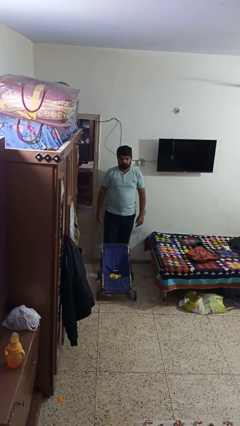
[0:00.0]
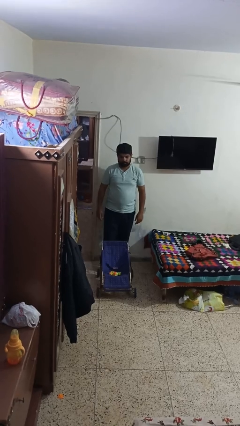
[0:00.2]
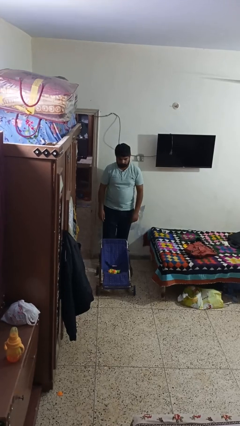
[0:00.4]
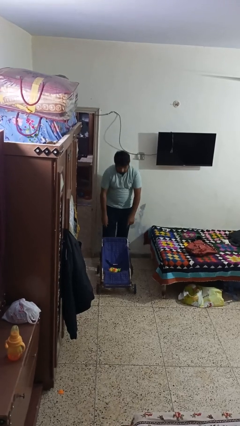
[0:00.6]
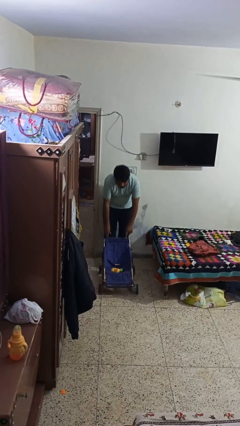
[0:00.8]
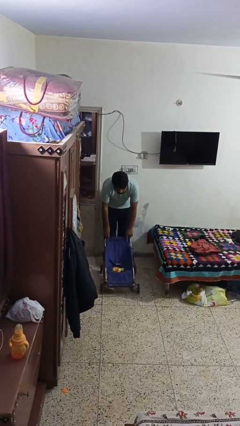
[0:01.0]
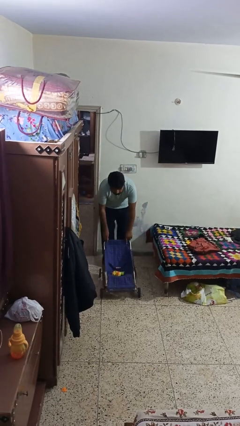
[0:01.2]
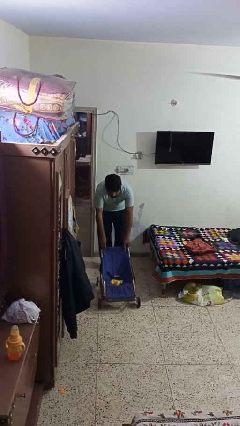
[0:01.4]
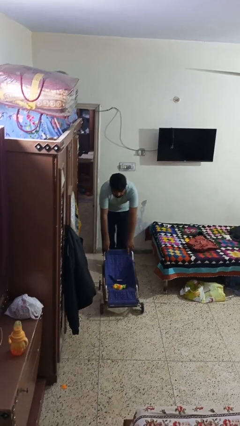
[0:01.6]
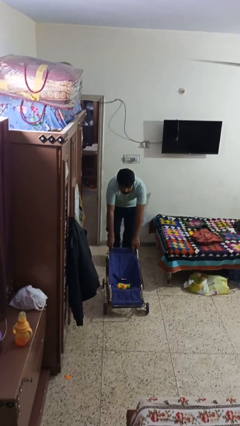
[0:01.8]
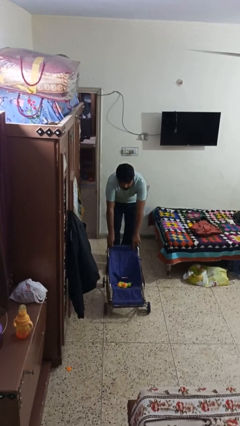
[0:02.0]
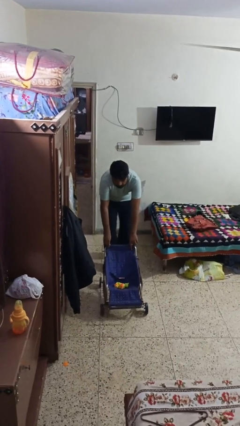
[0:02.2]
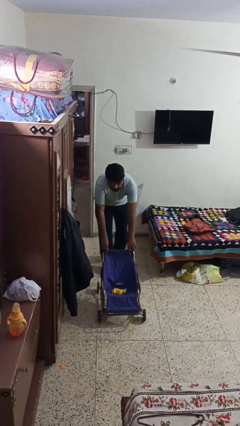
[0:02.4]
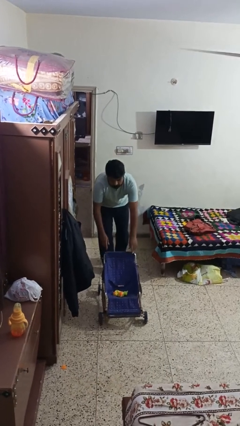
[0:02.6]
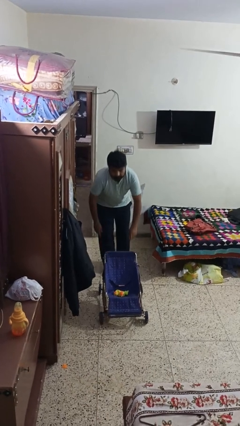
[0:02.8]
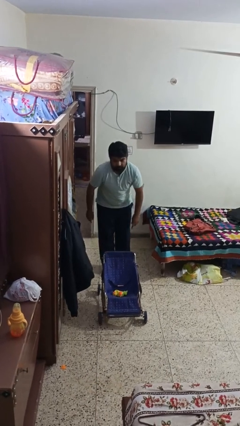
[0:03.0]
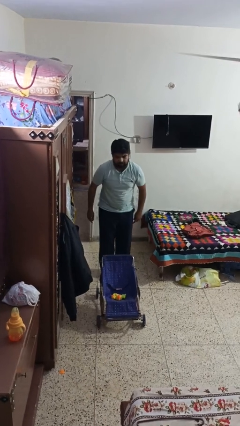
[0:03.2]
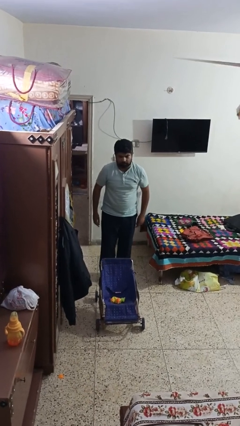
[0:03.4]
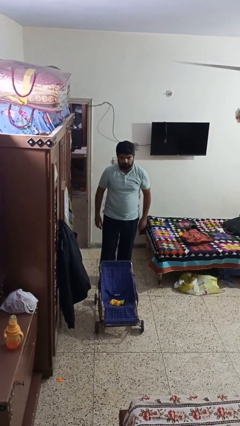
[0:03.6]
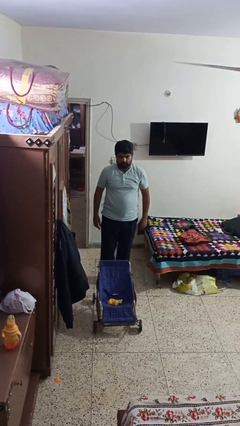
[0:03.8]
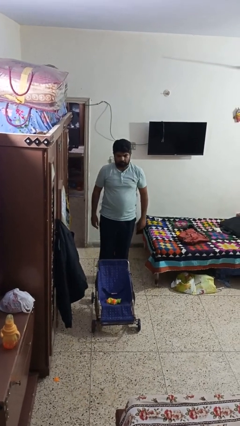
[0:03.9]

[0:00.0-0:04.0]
person pushes wheeled cart

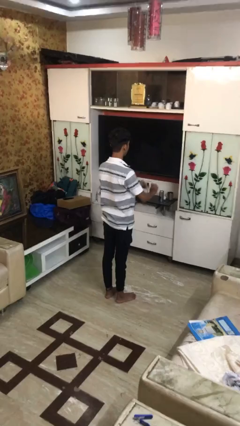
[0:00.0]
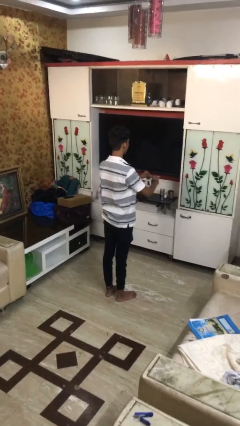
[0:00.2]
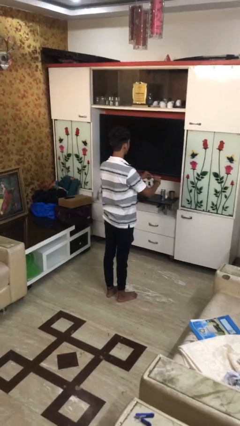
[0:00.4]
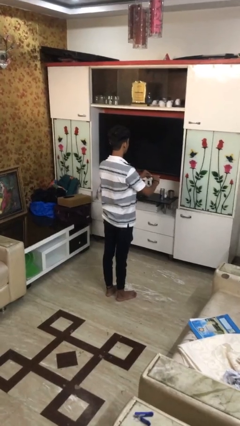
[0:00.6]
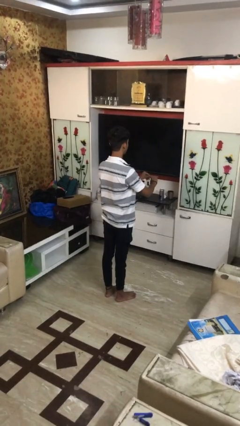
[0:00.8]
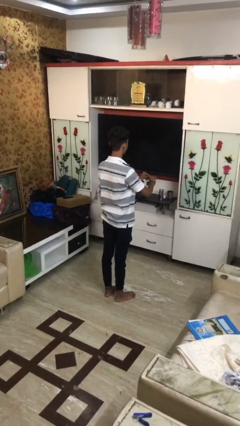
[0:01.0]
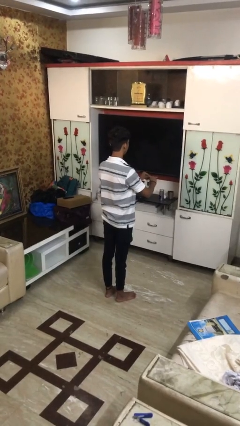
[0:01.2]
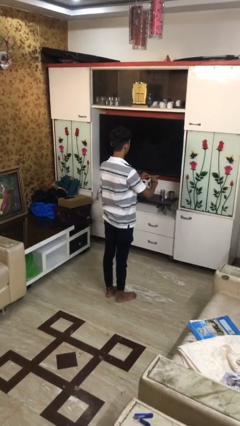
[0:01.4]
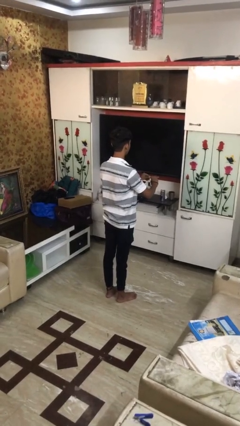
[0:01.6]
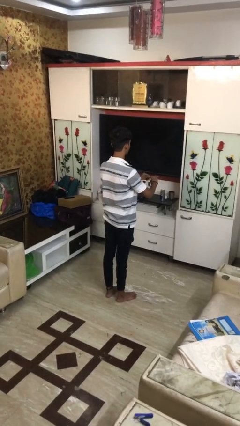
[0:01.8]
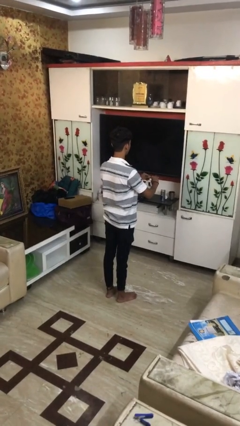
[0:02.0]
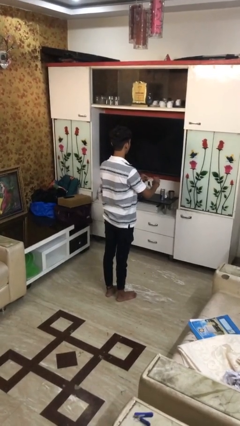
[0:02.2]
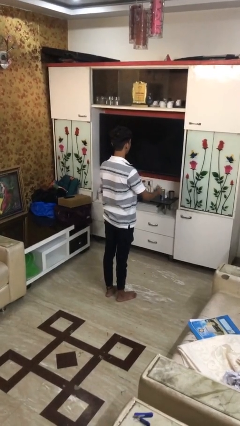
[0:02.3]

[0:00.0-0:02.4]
person files fingernails

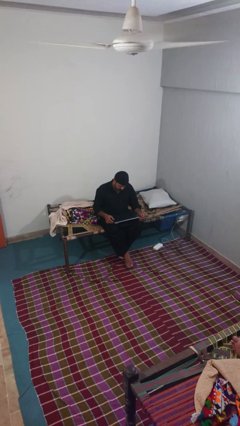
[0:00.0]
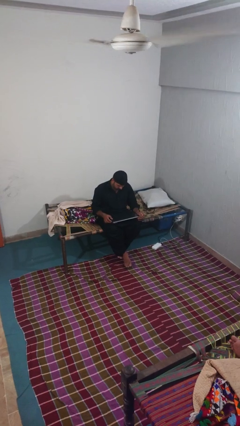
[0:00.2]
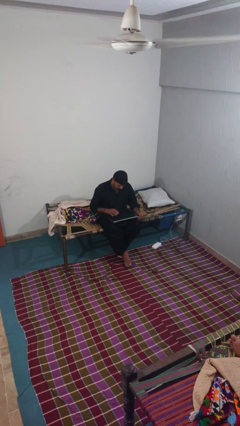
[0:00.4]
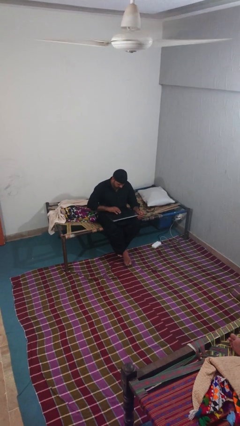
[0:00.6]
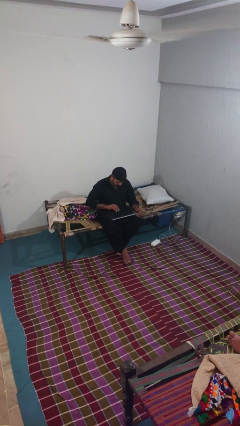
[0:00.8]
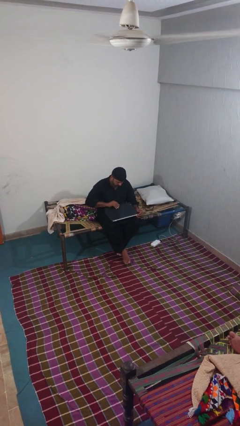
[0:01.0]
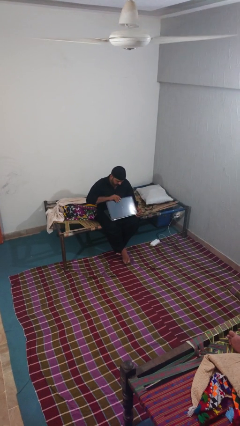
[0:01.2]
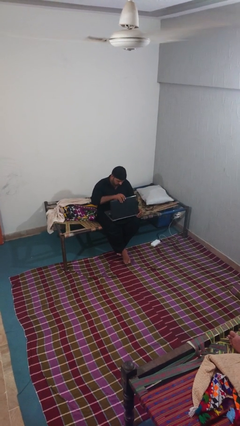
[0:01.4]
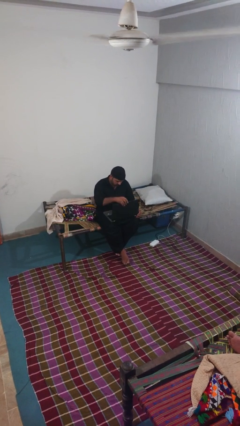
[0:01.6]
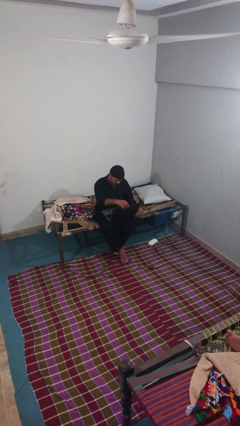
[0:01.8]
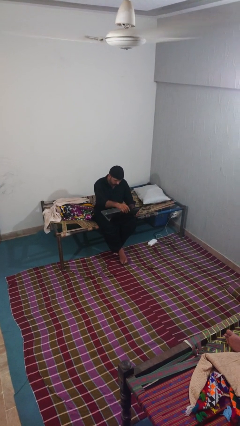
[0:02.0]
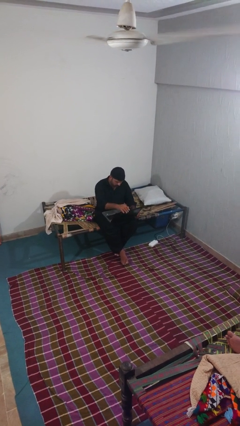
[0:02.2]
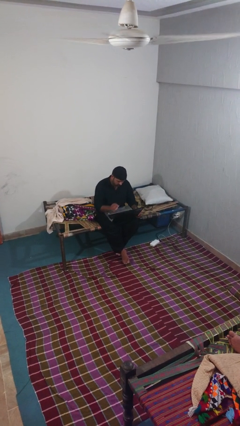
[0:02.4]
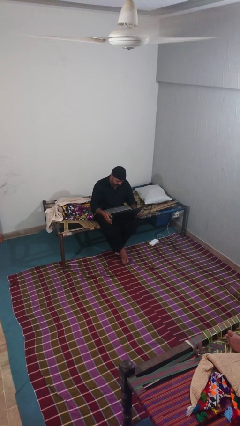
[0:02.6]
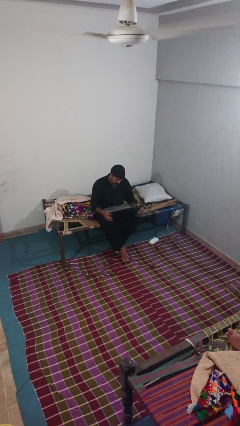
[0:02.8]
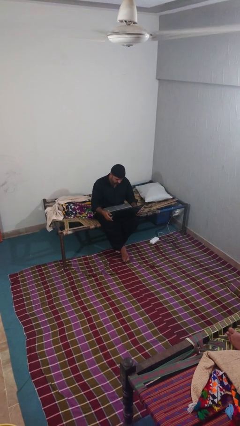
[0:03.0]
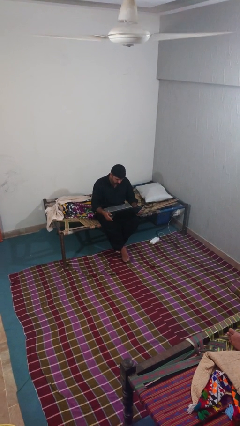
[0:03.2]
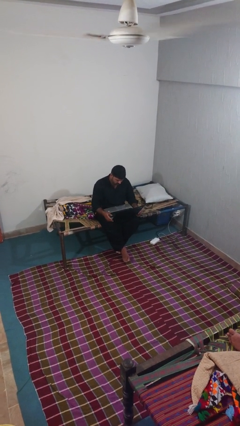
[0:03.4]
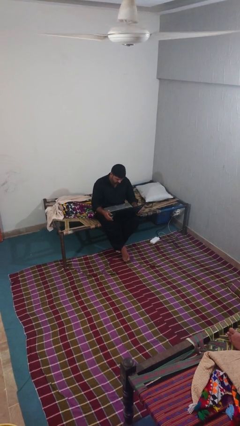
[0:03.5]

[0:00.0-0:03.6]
person opens laptop

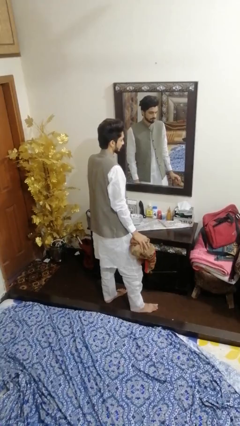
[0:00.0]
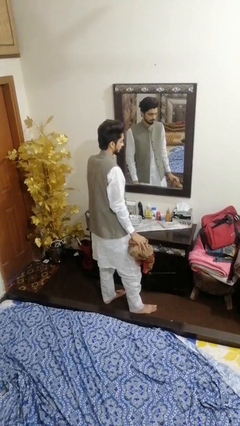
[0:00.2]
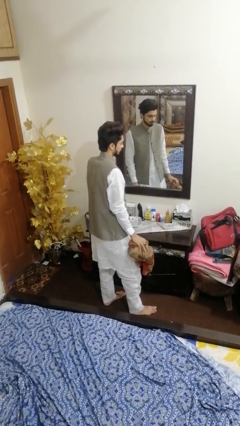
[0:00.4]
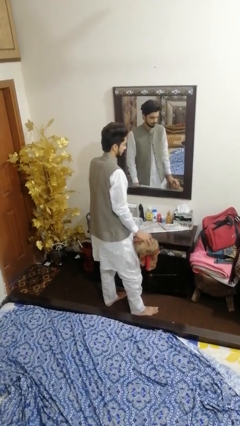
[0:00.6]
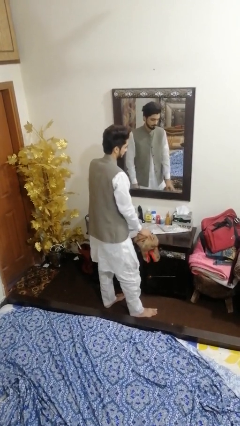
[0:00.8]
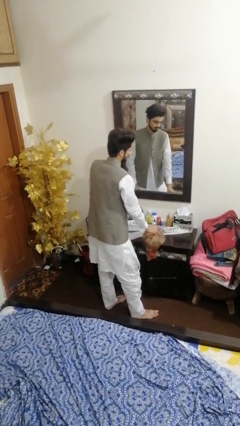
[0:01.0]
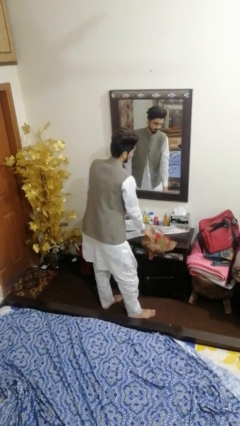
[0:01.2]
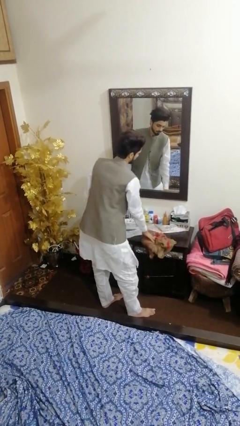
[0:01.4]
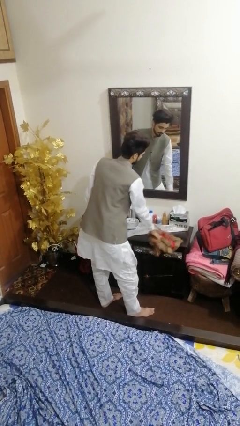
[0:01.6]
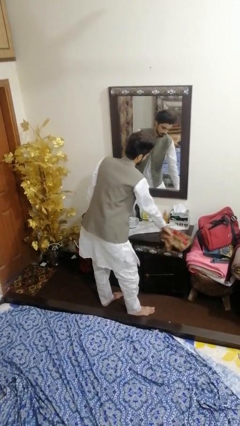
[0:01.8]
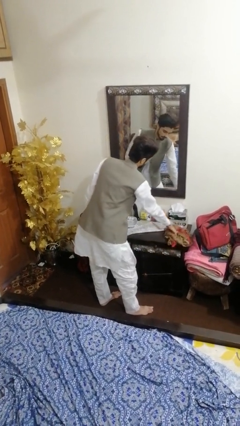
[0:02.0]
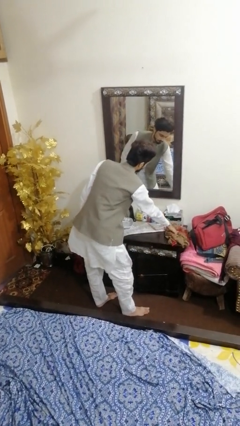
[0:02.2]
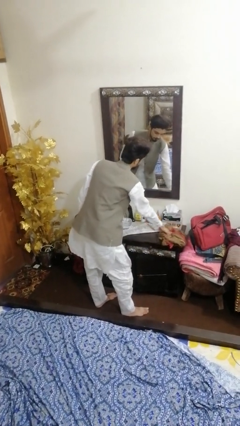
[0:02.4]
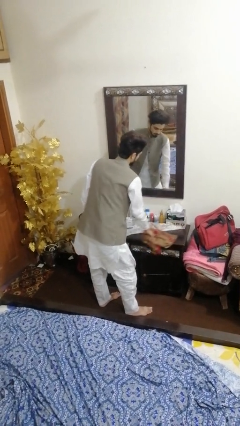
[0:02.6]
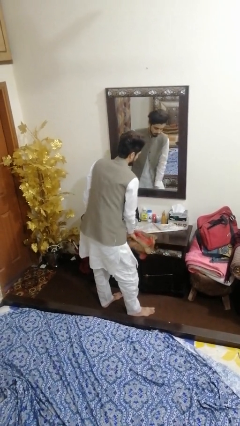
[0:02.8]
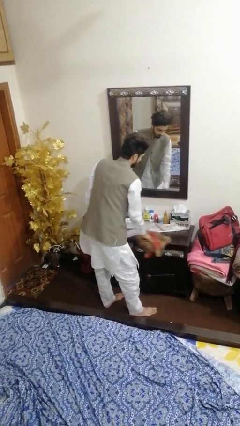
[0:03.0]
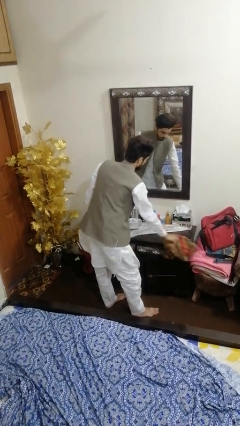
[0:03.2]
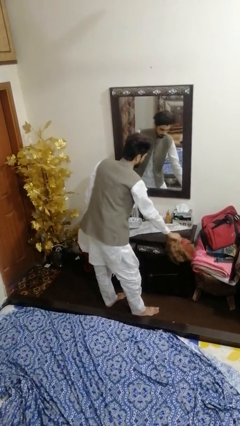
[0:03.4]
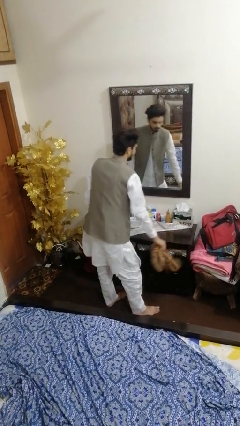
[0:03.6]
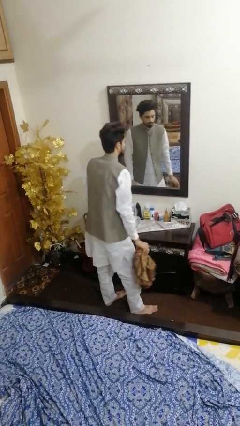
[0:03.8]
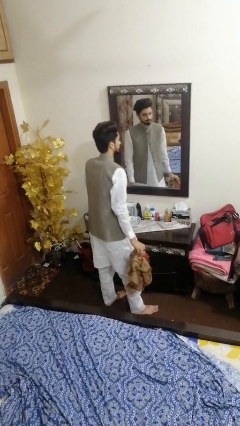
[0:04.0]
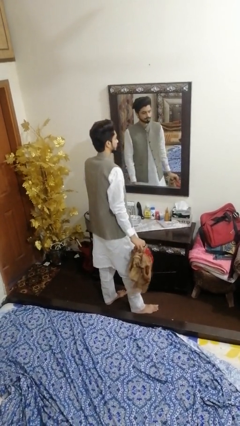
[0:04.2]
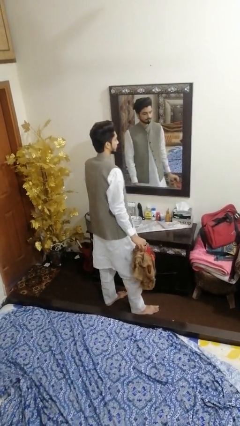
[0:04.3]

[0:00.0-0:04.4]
person cleans table with rag

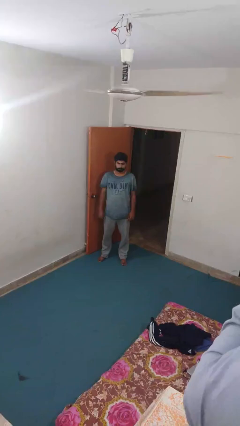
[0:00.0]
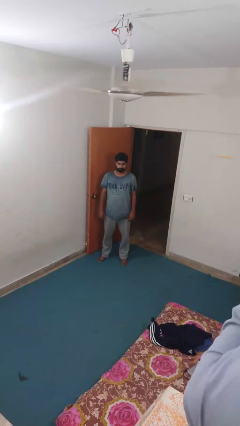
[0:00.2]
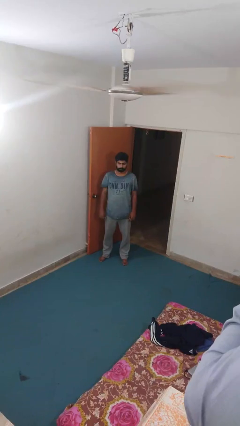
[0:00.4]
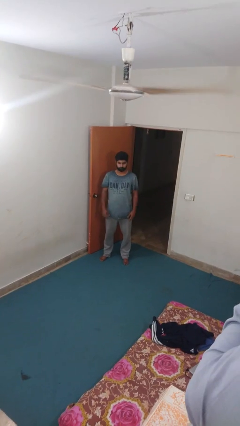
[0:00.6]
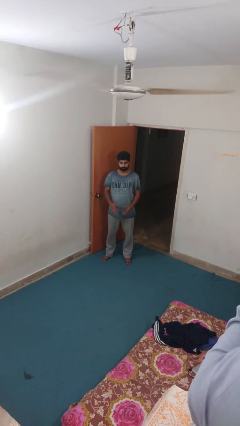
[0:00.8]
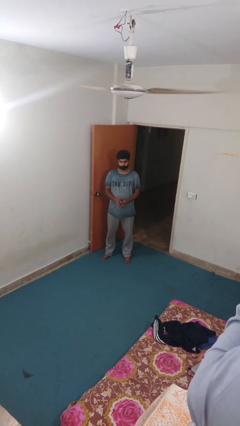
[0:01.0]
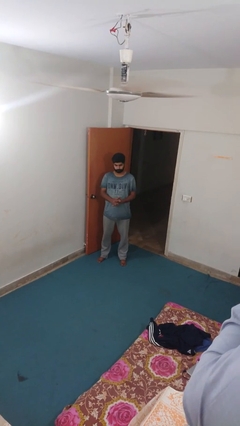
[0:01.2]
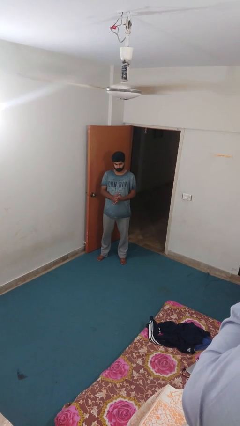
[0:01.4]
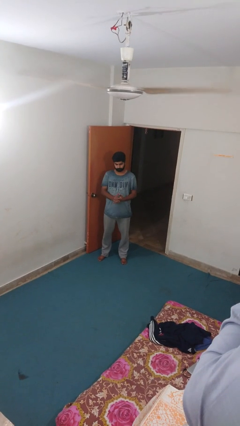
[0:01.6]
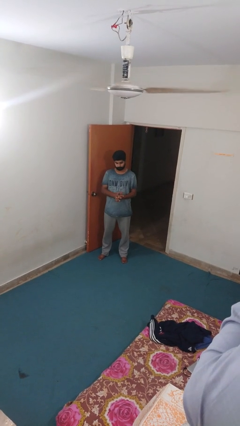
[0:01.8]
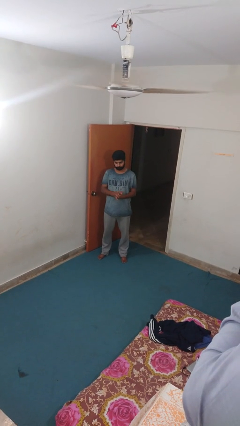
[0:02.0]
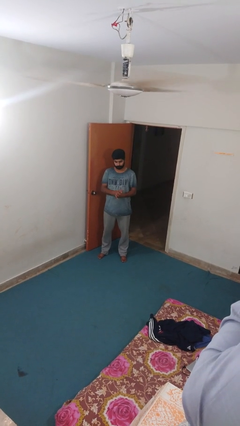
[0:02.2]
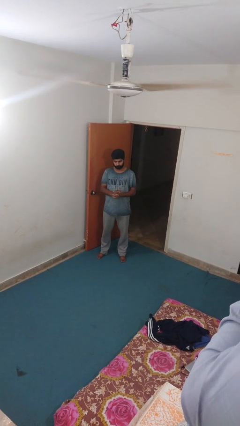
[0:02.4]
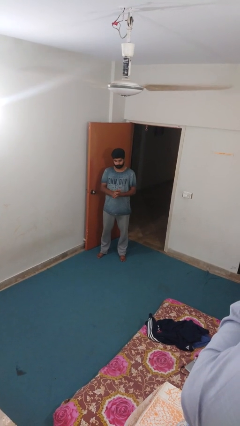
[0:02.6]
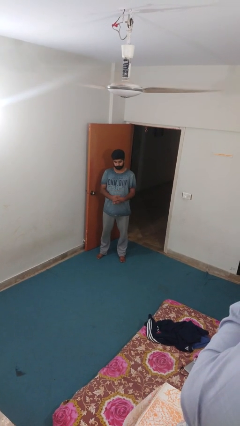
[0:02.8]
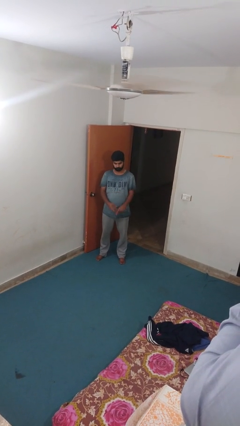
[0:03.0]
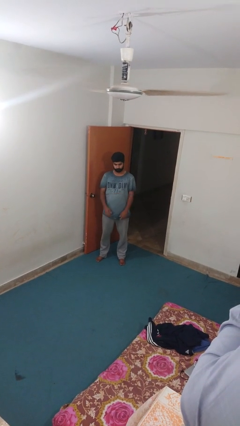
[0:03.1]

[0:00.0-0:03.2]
person snaps fingers

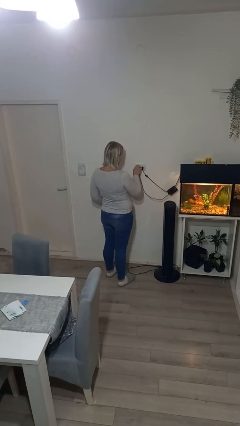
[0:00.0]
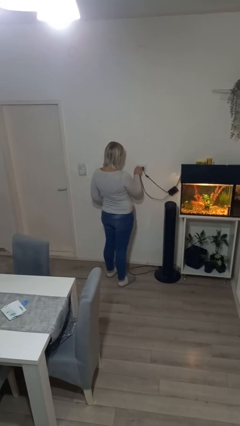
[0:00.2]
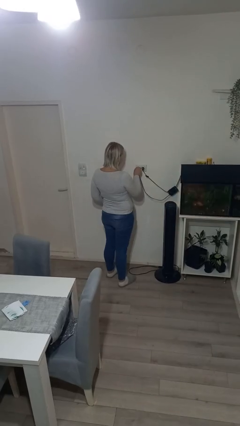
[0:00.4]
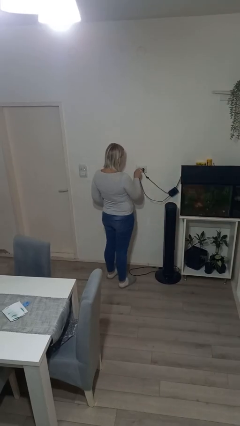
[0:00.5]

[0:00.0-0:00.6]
person unplugs from electrical socket
